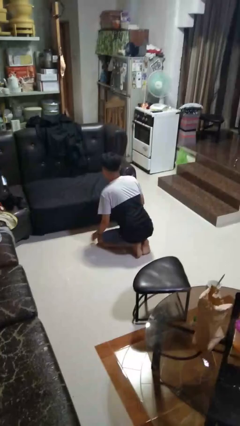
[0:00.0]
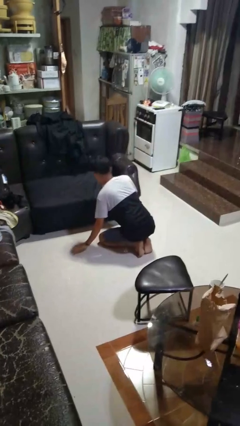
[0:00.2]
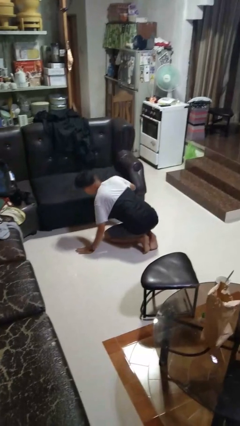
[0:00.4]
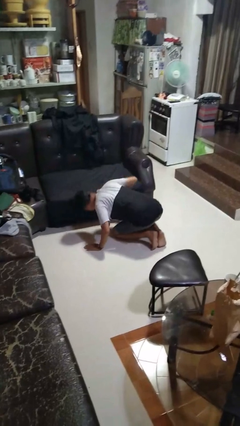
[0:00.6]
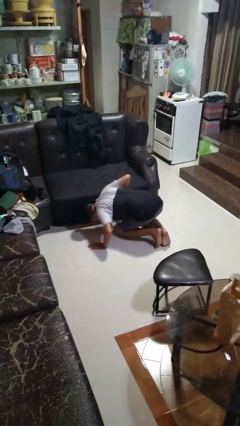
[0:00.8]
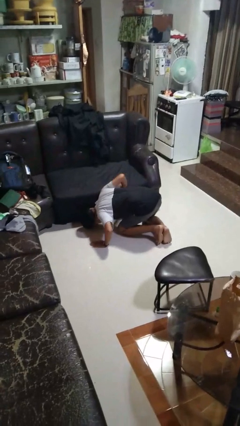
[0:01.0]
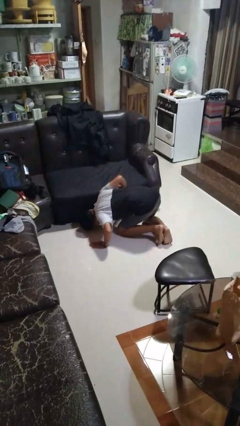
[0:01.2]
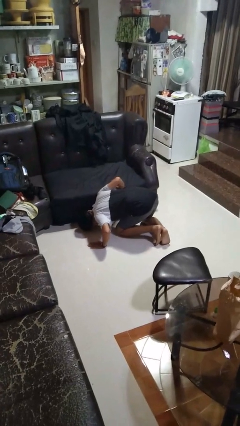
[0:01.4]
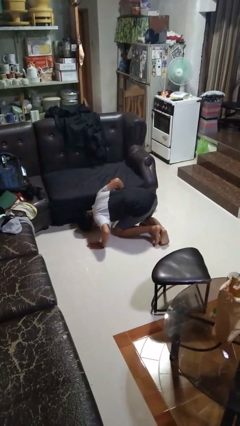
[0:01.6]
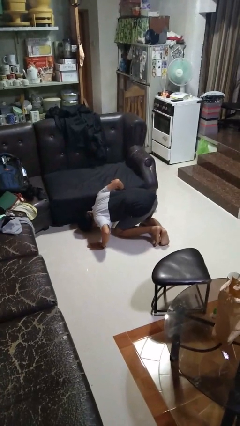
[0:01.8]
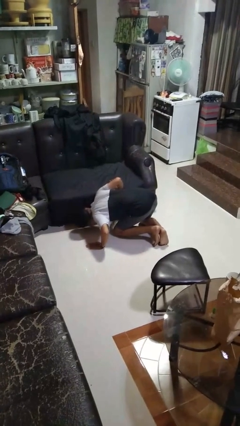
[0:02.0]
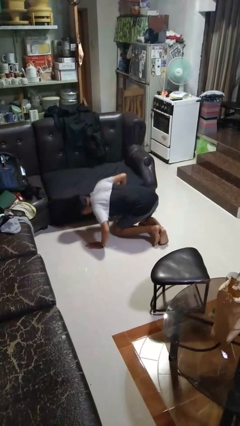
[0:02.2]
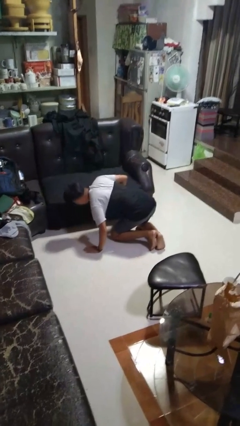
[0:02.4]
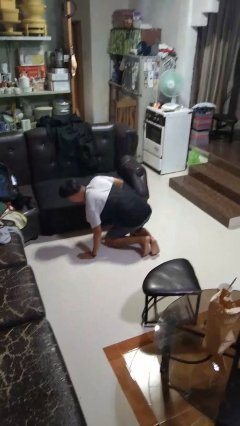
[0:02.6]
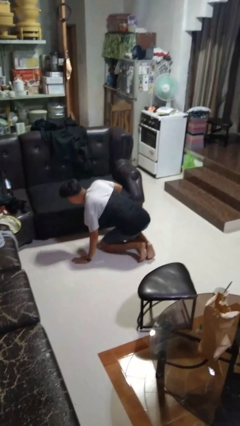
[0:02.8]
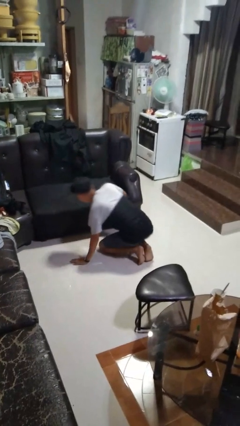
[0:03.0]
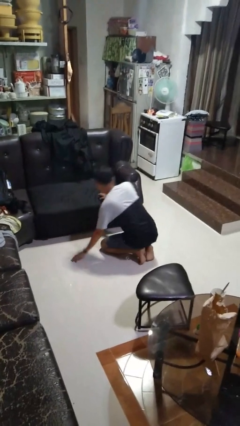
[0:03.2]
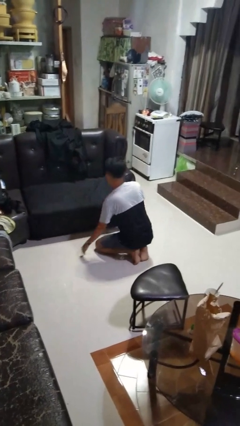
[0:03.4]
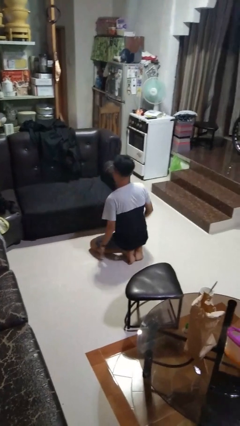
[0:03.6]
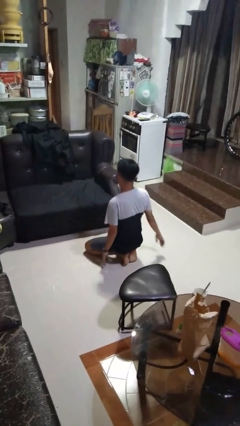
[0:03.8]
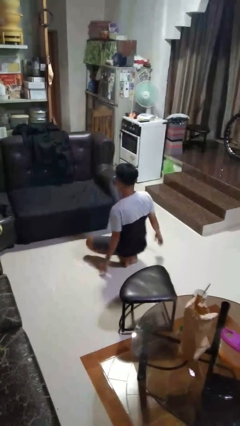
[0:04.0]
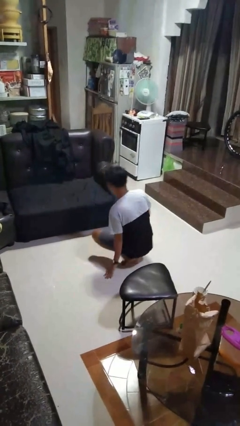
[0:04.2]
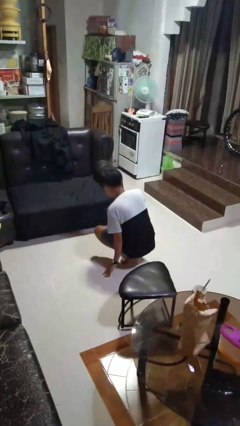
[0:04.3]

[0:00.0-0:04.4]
person searches under couch

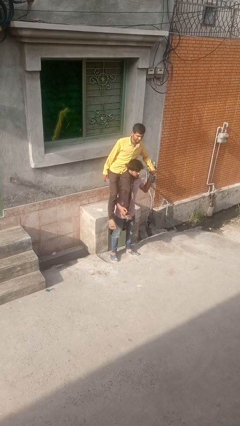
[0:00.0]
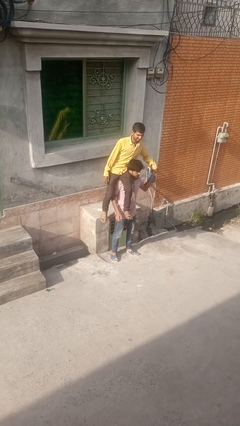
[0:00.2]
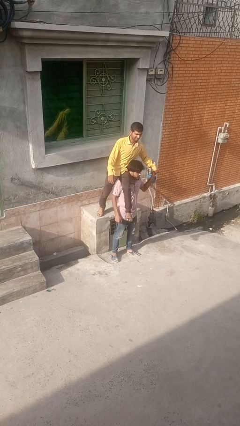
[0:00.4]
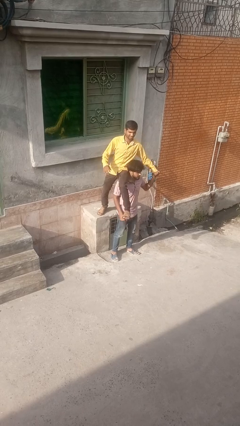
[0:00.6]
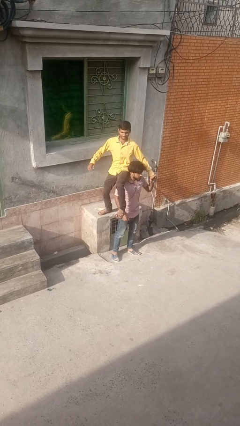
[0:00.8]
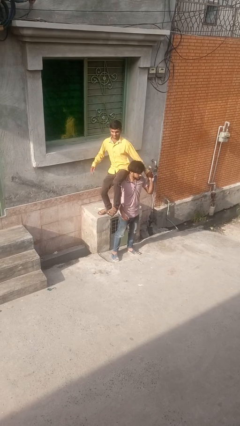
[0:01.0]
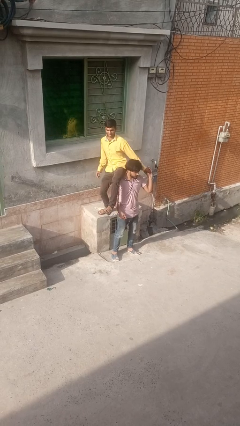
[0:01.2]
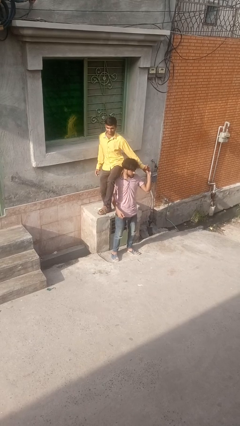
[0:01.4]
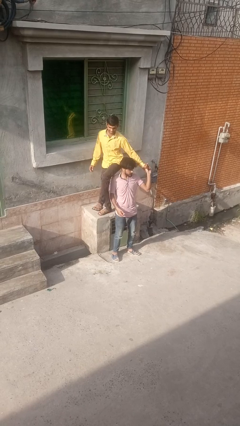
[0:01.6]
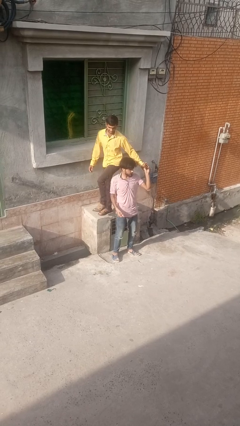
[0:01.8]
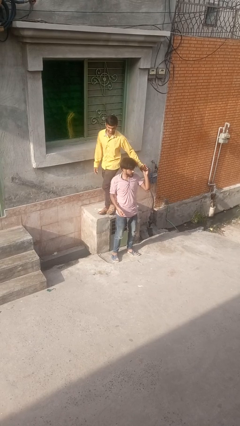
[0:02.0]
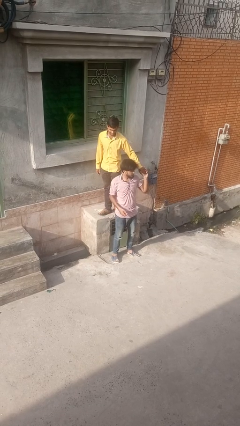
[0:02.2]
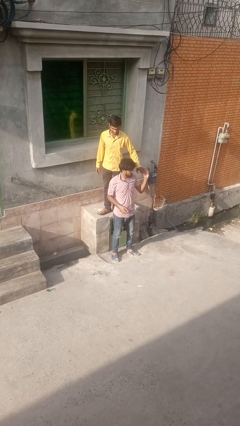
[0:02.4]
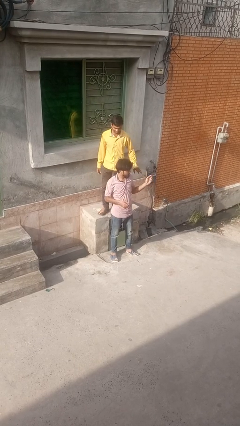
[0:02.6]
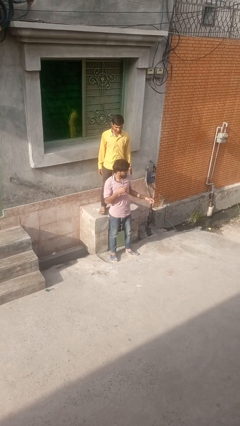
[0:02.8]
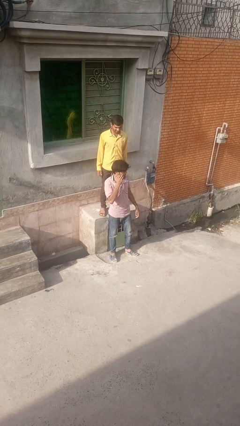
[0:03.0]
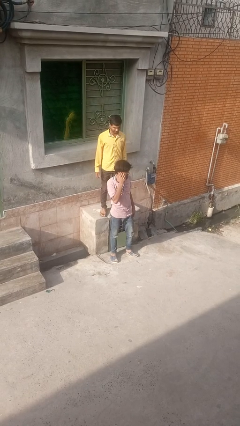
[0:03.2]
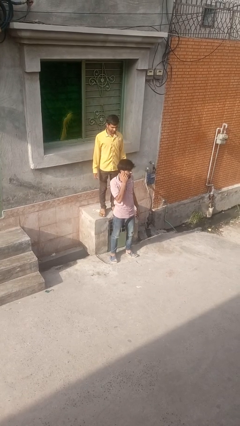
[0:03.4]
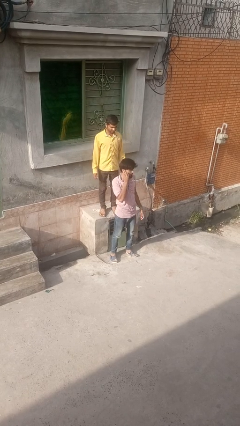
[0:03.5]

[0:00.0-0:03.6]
person puts down person

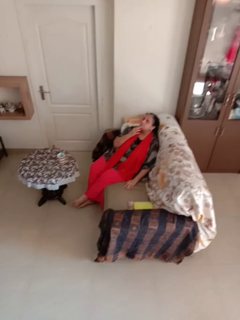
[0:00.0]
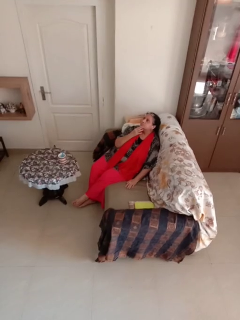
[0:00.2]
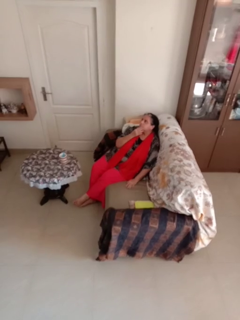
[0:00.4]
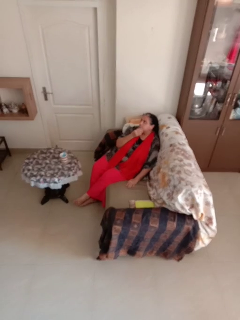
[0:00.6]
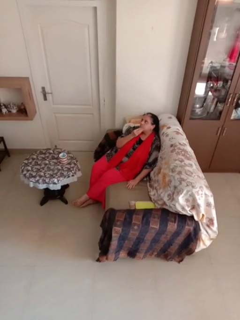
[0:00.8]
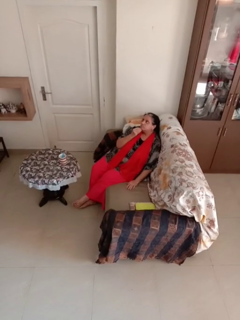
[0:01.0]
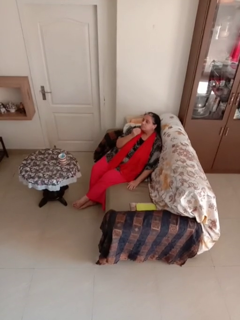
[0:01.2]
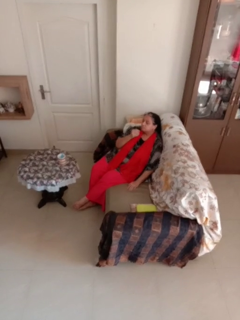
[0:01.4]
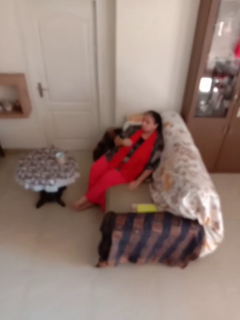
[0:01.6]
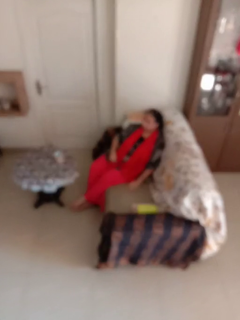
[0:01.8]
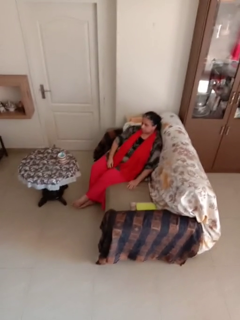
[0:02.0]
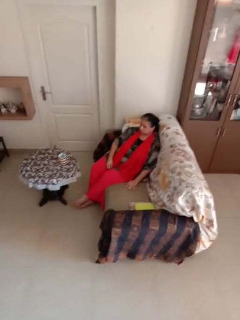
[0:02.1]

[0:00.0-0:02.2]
person strokes chin

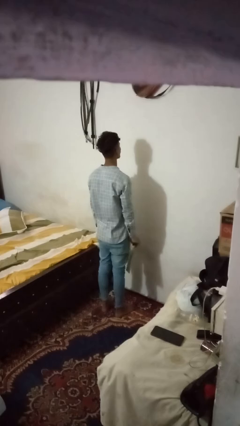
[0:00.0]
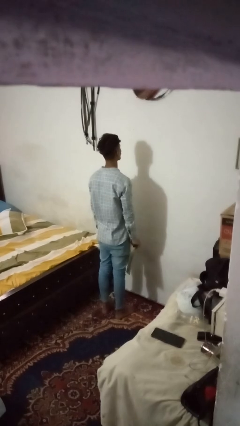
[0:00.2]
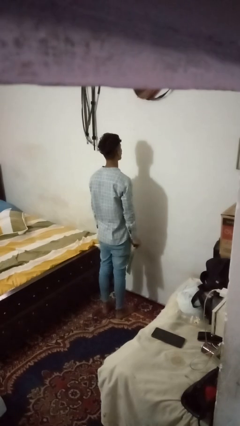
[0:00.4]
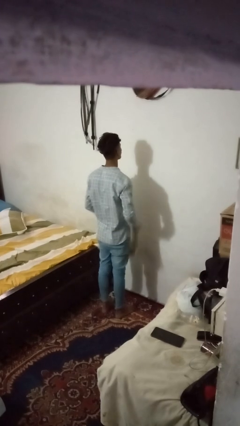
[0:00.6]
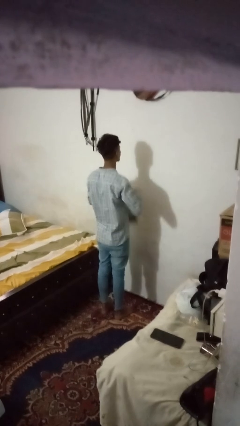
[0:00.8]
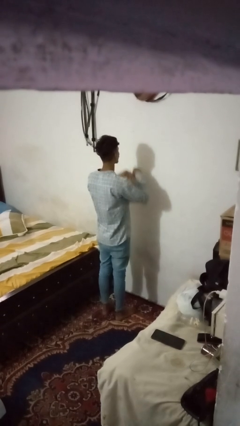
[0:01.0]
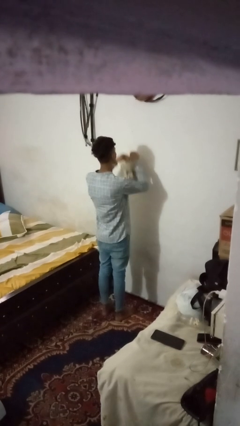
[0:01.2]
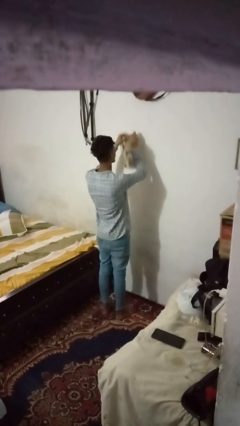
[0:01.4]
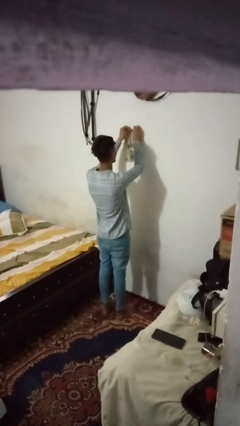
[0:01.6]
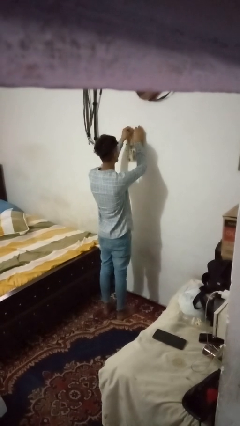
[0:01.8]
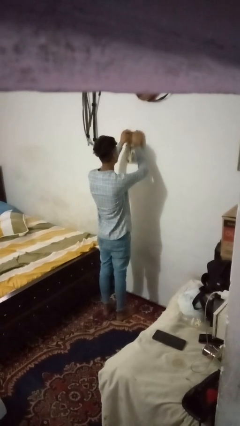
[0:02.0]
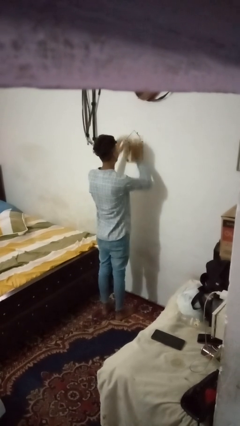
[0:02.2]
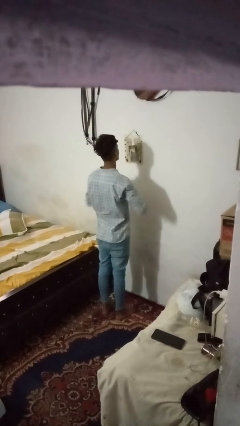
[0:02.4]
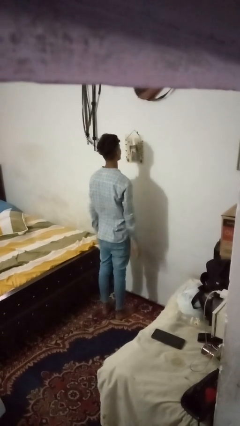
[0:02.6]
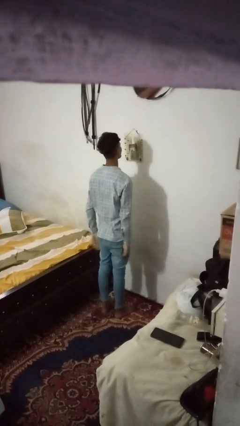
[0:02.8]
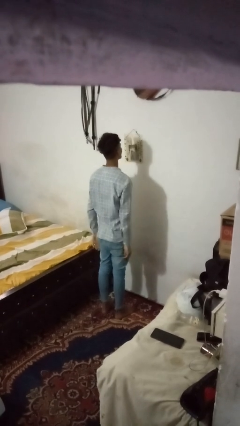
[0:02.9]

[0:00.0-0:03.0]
person puts up picture frame

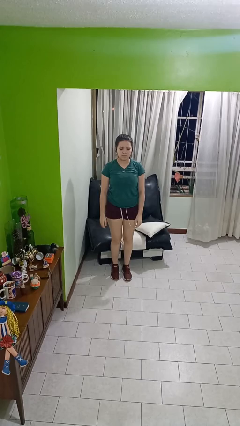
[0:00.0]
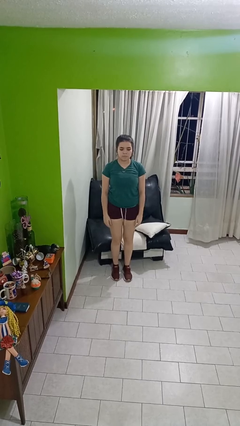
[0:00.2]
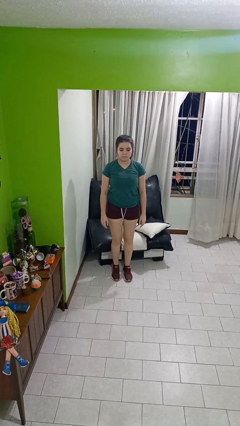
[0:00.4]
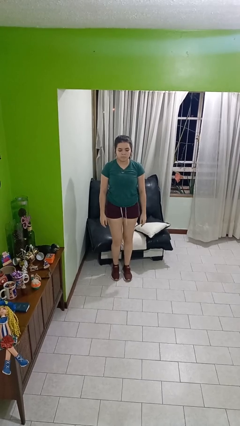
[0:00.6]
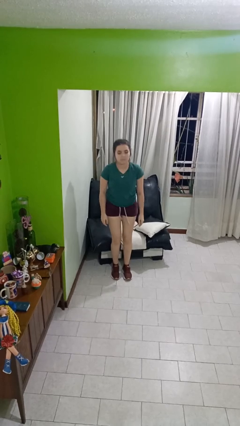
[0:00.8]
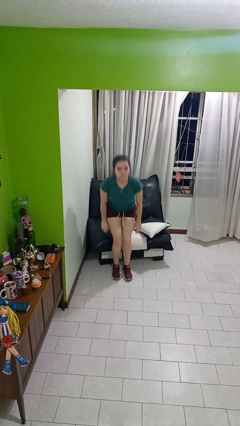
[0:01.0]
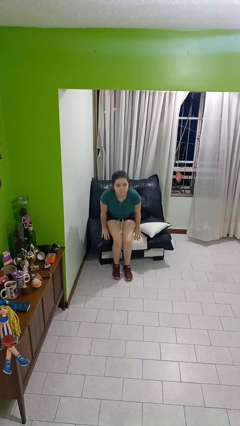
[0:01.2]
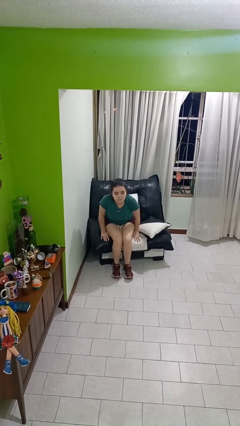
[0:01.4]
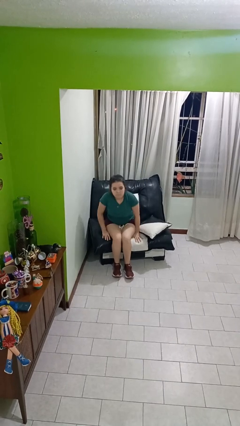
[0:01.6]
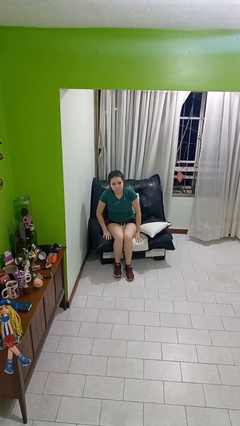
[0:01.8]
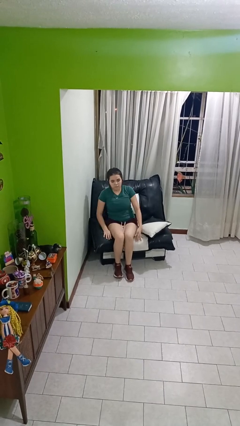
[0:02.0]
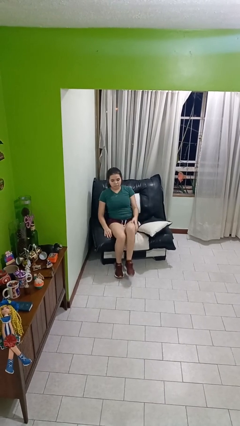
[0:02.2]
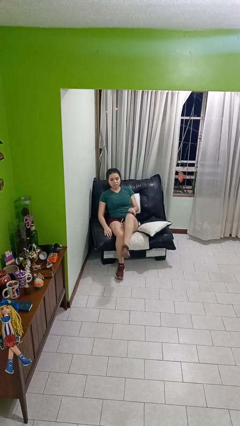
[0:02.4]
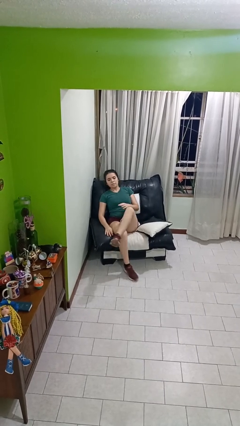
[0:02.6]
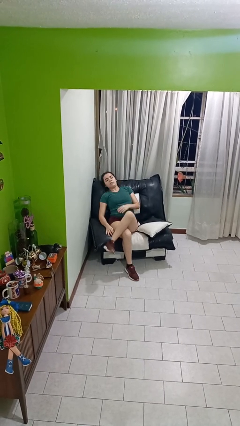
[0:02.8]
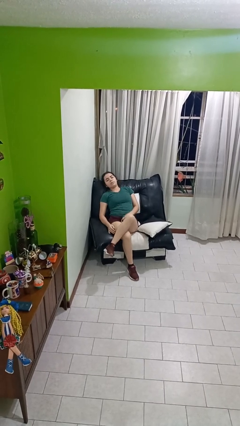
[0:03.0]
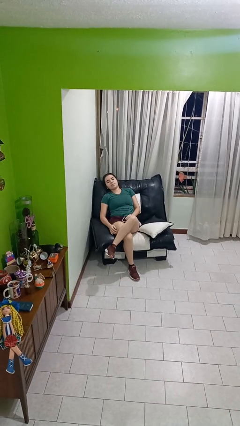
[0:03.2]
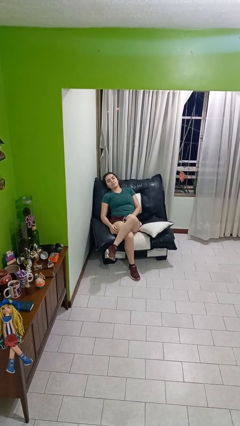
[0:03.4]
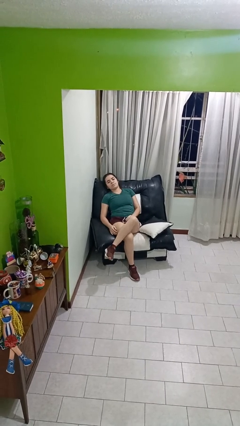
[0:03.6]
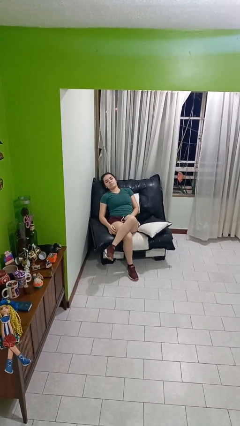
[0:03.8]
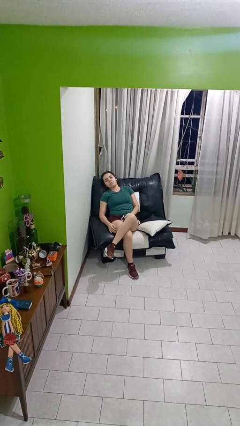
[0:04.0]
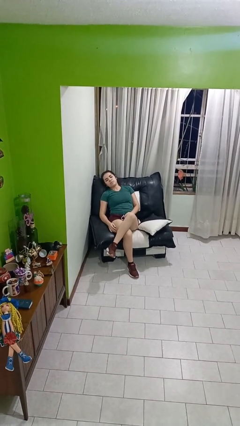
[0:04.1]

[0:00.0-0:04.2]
person lies down on couch

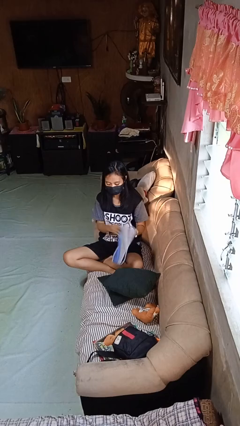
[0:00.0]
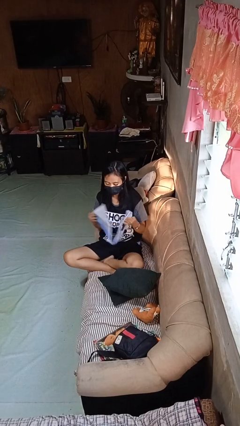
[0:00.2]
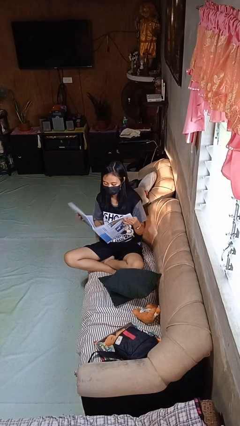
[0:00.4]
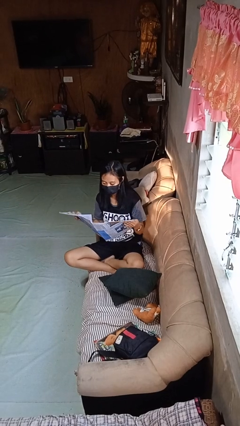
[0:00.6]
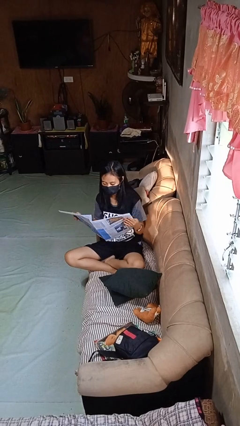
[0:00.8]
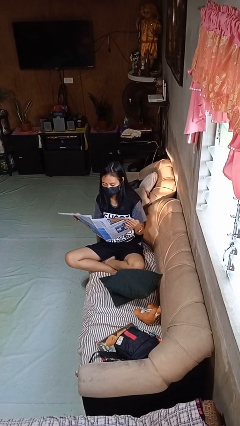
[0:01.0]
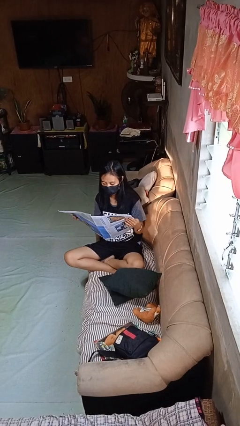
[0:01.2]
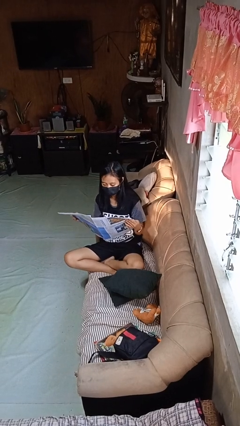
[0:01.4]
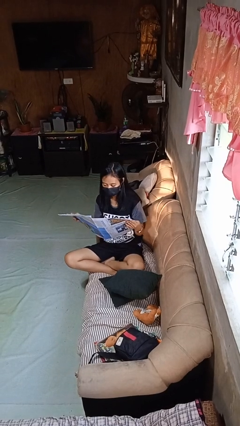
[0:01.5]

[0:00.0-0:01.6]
person reads newspaper
